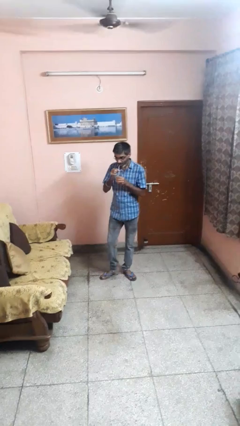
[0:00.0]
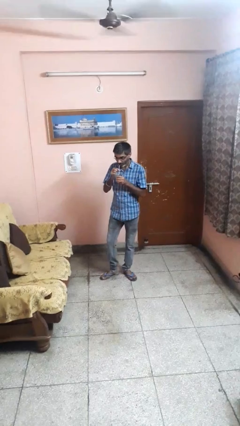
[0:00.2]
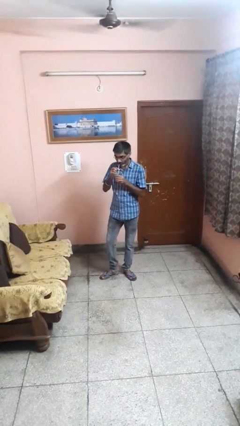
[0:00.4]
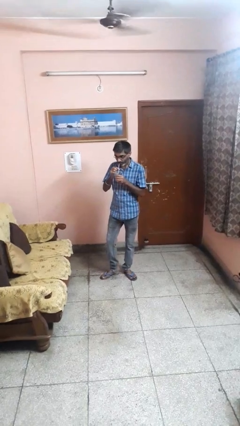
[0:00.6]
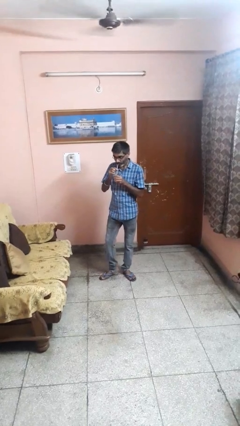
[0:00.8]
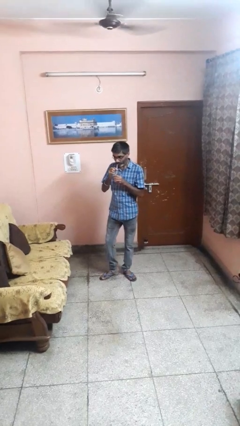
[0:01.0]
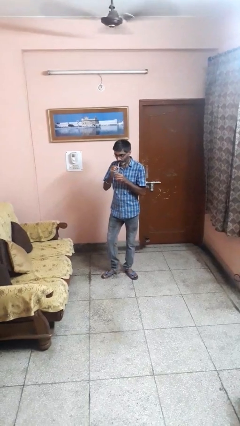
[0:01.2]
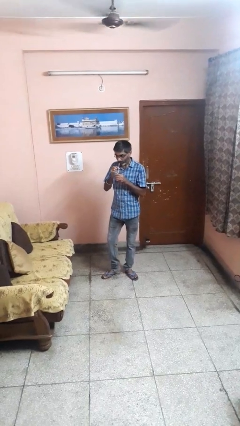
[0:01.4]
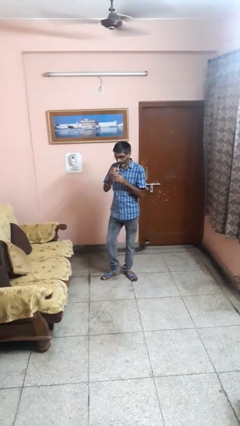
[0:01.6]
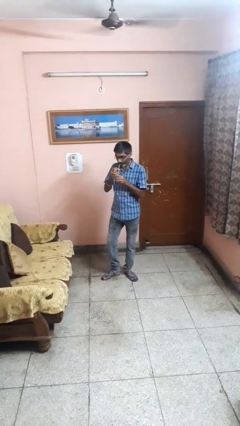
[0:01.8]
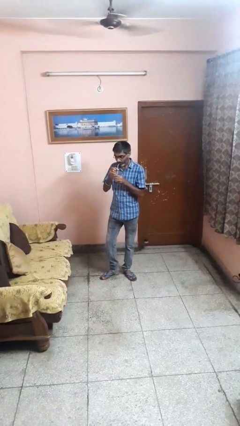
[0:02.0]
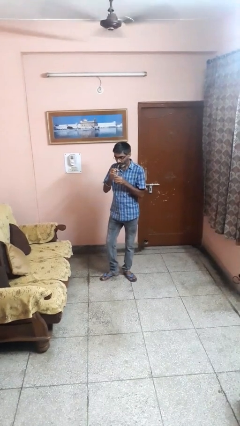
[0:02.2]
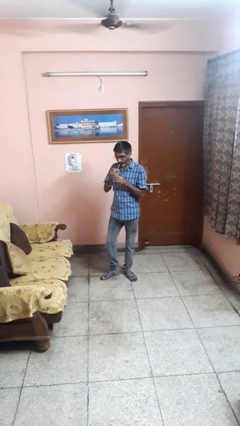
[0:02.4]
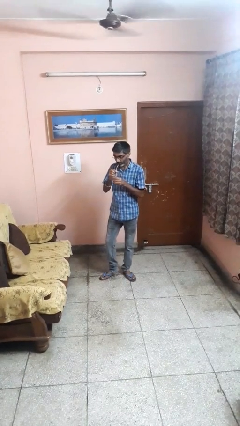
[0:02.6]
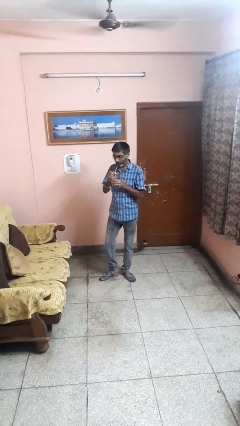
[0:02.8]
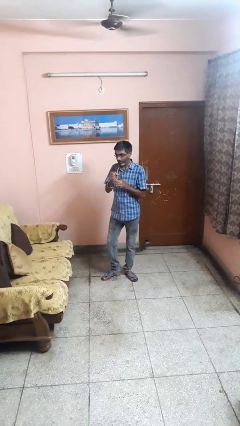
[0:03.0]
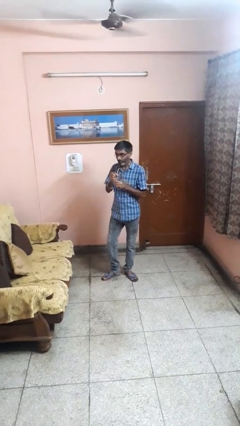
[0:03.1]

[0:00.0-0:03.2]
person drinks from straw

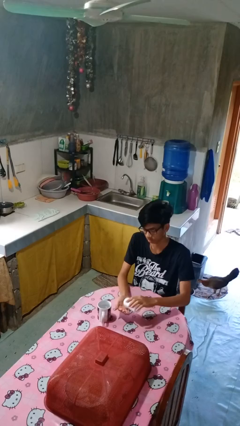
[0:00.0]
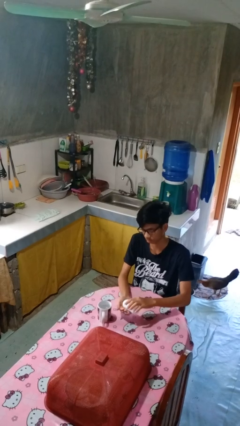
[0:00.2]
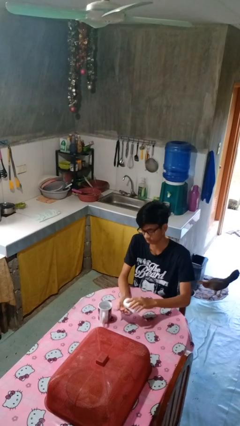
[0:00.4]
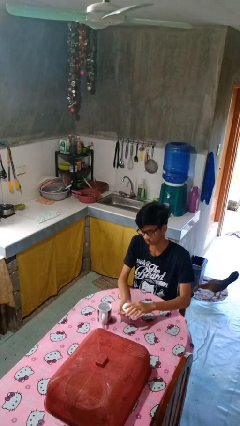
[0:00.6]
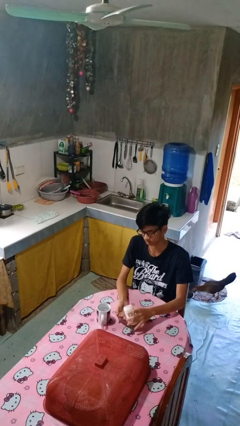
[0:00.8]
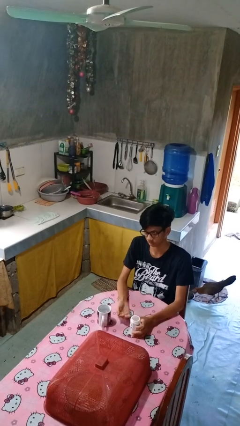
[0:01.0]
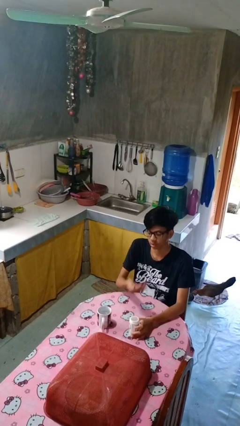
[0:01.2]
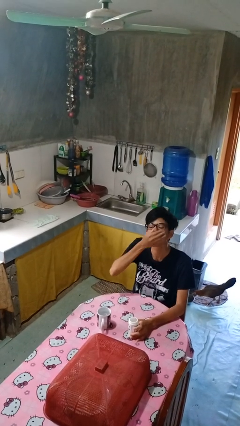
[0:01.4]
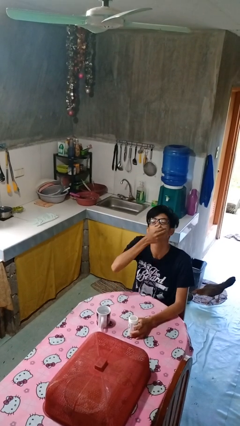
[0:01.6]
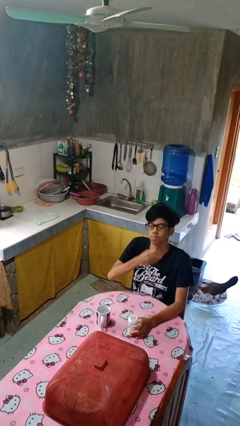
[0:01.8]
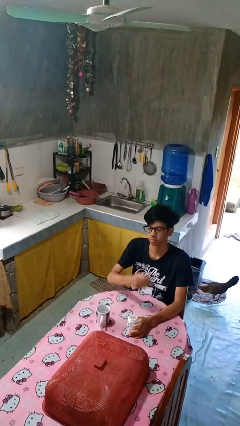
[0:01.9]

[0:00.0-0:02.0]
person takes medicine pills

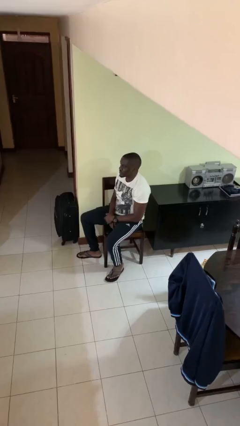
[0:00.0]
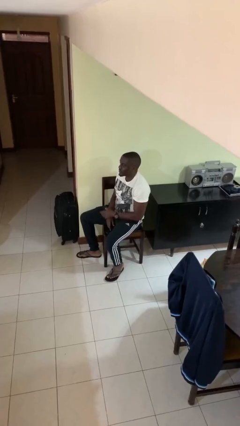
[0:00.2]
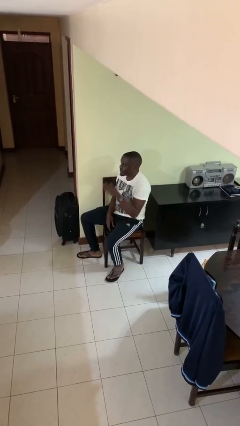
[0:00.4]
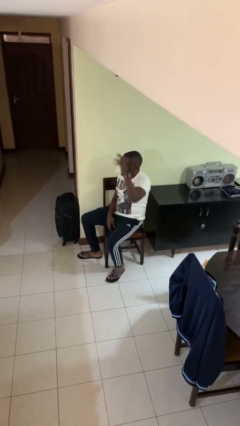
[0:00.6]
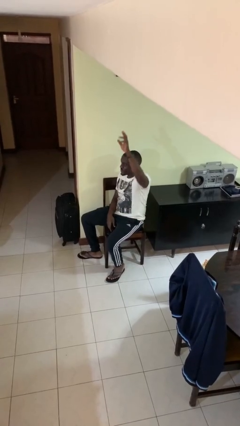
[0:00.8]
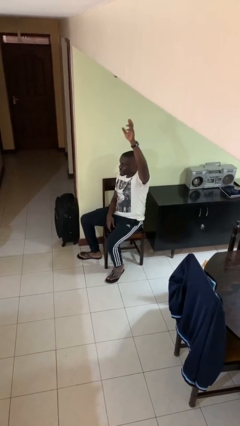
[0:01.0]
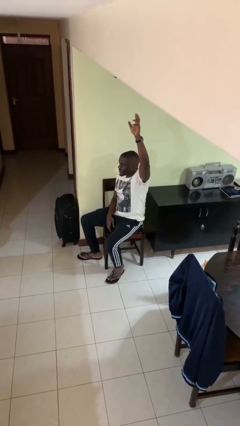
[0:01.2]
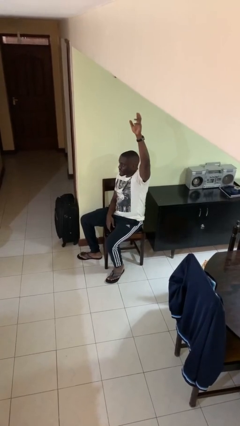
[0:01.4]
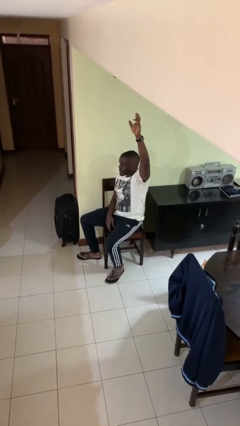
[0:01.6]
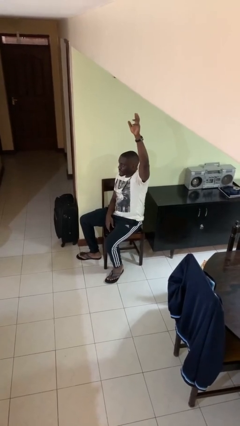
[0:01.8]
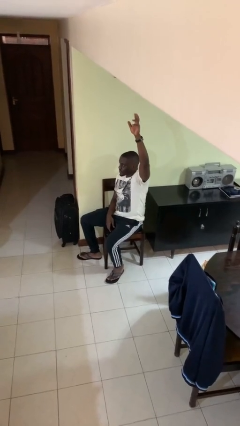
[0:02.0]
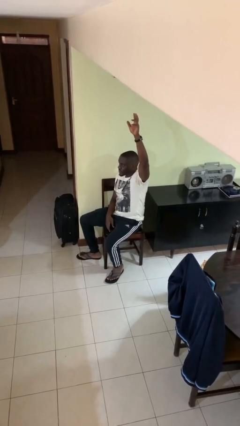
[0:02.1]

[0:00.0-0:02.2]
person gestures raise hand

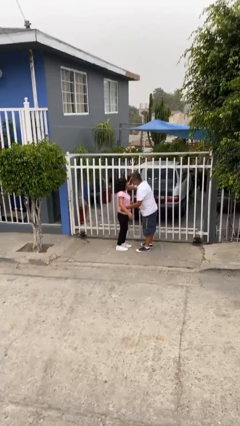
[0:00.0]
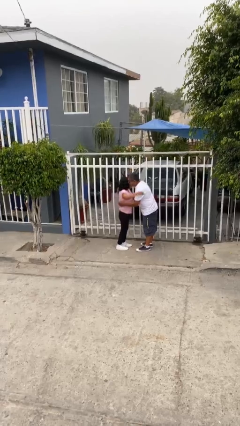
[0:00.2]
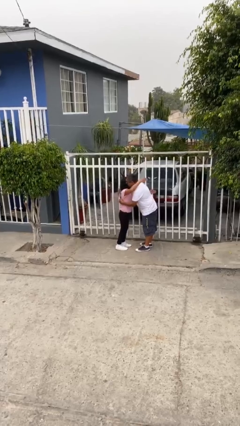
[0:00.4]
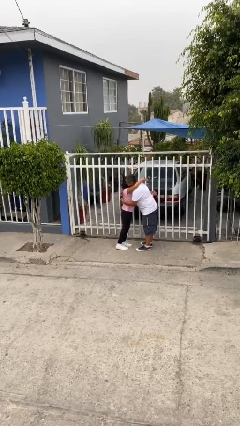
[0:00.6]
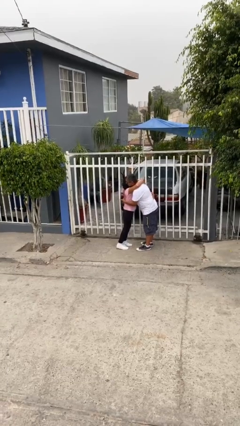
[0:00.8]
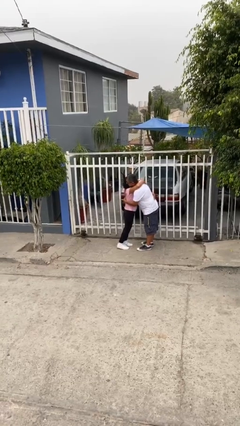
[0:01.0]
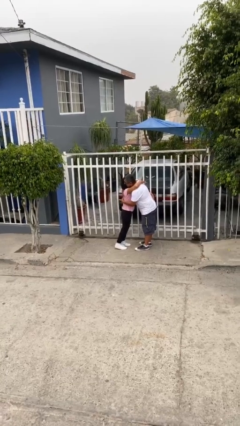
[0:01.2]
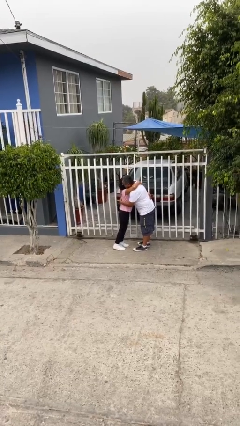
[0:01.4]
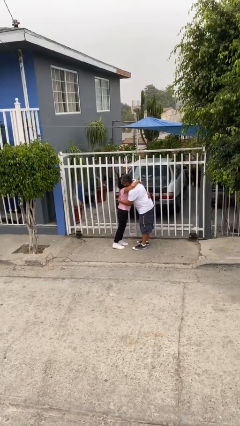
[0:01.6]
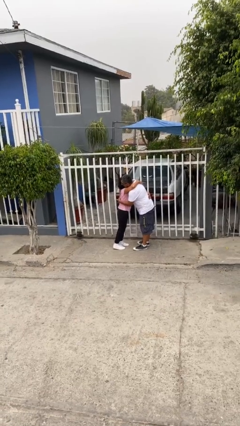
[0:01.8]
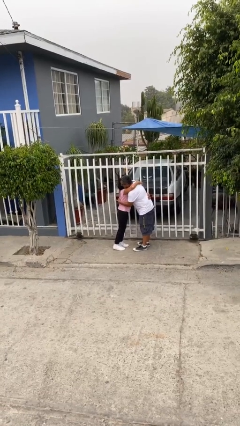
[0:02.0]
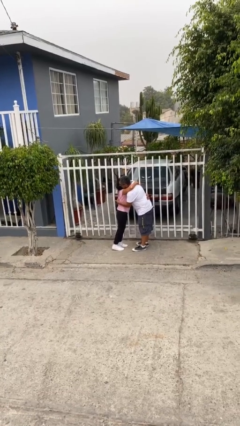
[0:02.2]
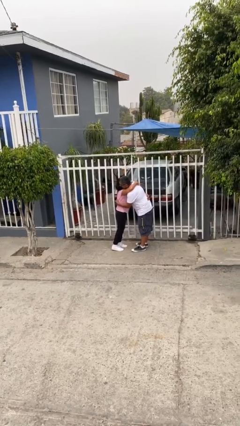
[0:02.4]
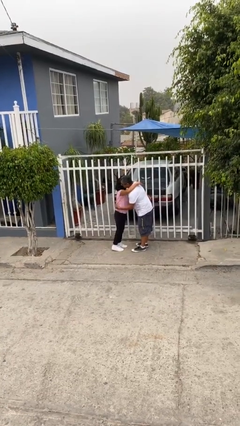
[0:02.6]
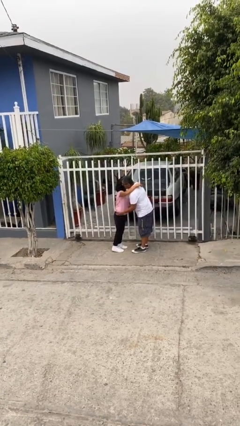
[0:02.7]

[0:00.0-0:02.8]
person embraces person

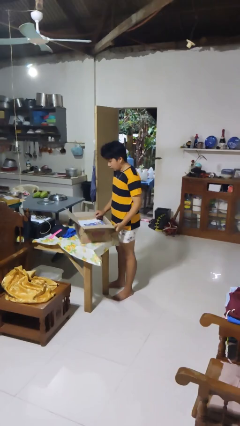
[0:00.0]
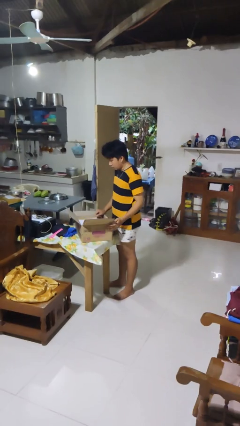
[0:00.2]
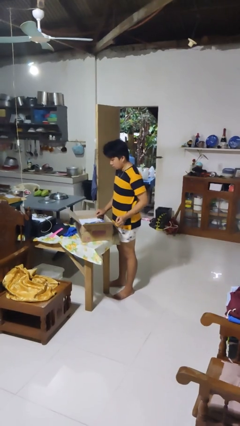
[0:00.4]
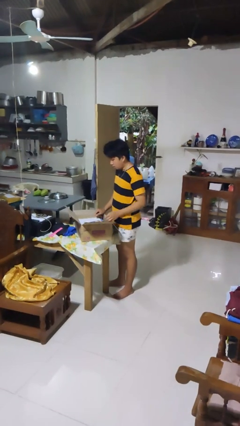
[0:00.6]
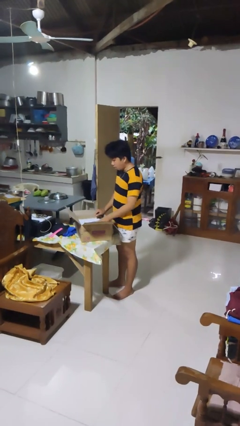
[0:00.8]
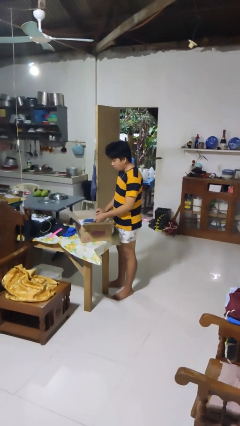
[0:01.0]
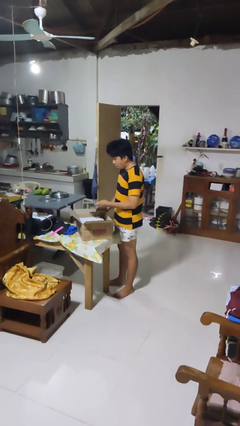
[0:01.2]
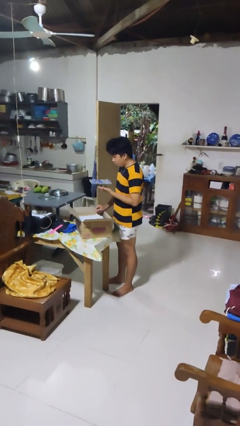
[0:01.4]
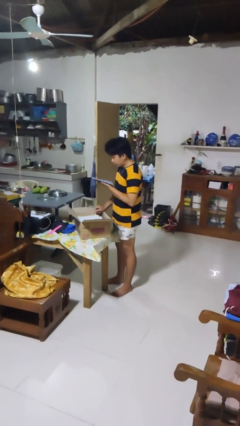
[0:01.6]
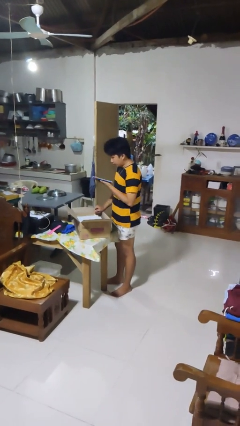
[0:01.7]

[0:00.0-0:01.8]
person takes object from box

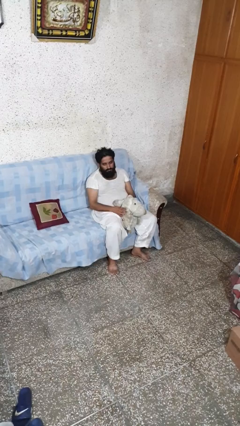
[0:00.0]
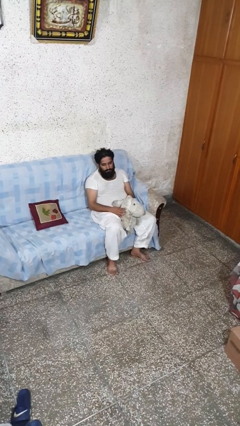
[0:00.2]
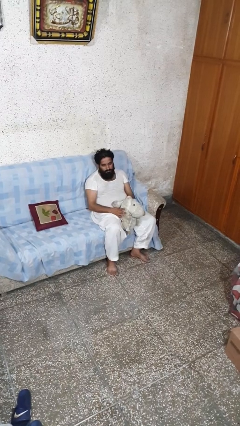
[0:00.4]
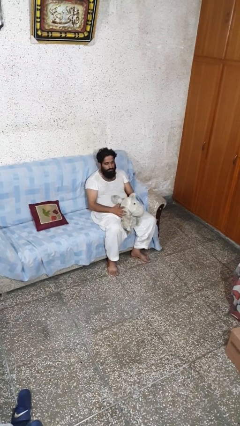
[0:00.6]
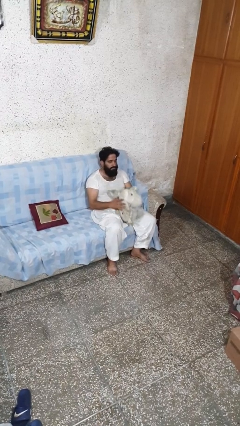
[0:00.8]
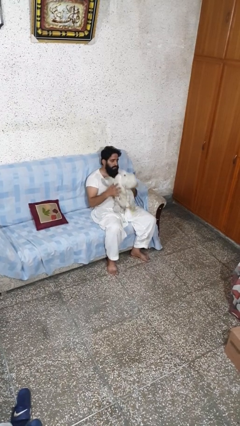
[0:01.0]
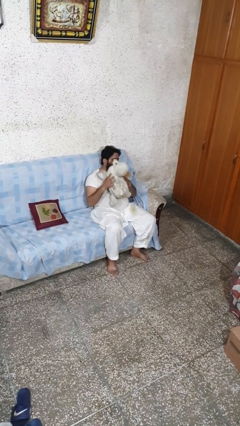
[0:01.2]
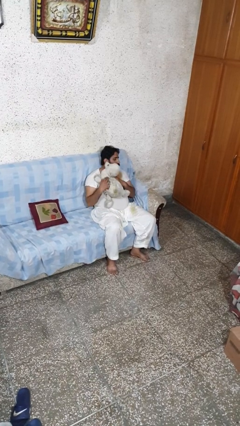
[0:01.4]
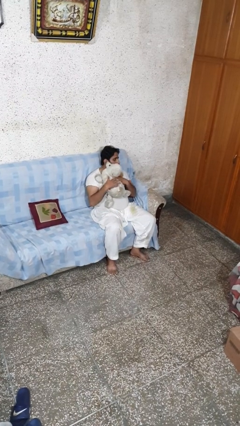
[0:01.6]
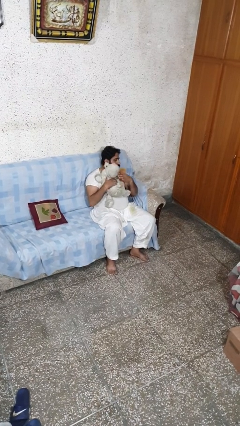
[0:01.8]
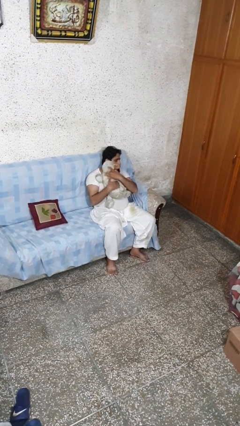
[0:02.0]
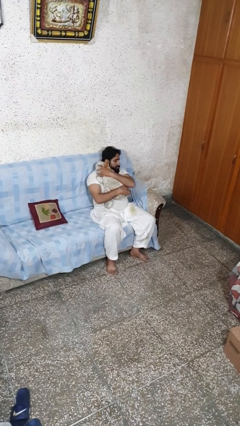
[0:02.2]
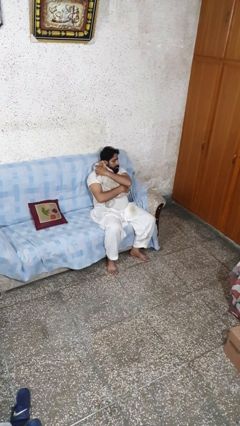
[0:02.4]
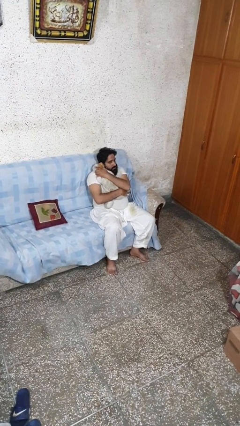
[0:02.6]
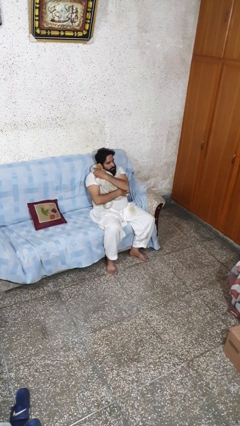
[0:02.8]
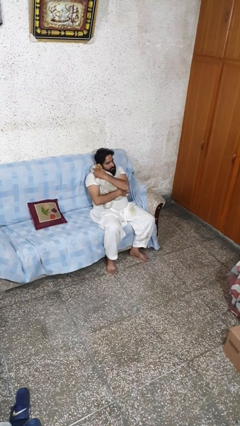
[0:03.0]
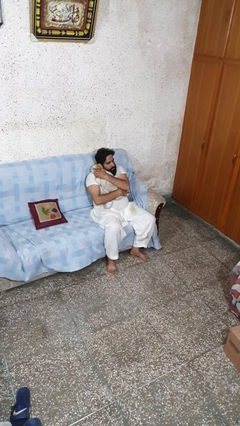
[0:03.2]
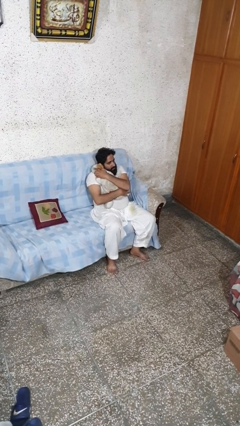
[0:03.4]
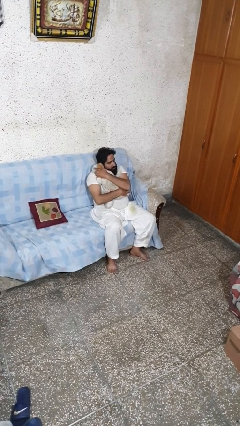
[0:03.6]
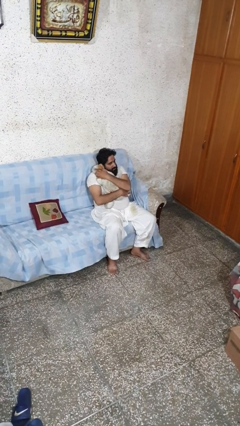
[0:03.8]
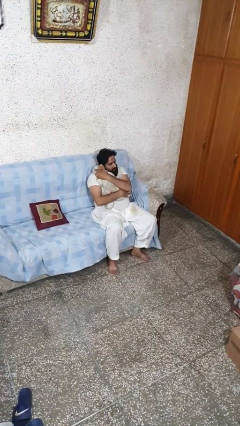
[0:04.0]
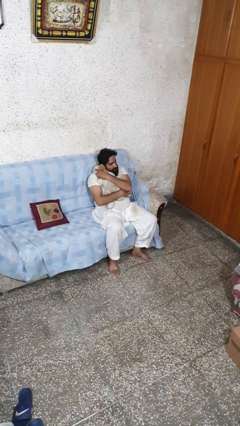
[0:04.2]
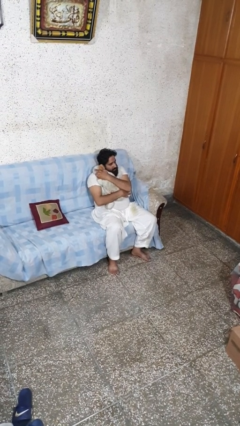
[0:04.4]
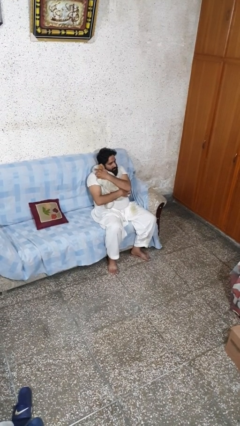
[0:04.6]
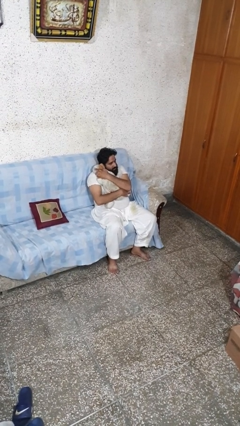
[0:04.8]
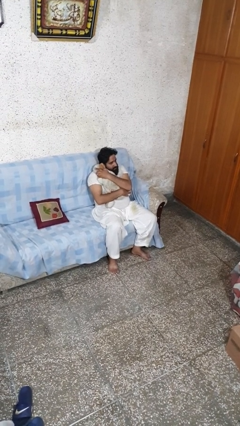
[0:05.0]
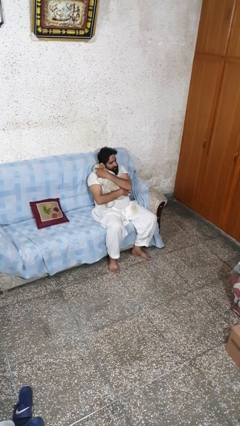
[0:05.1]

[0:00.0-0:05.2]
person hugs stuffed animal
